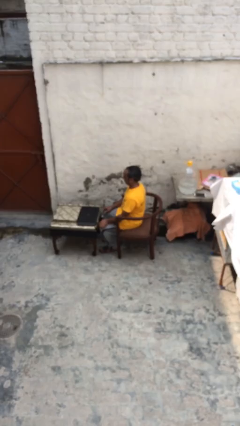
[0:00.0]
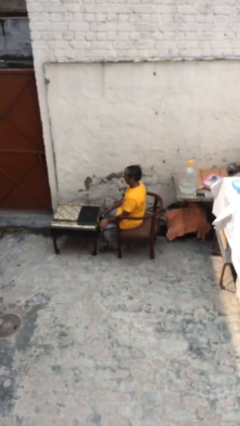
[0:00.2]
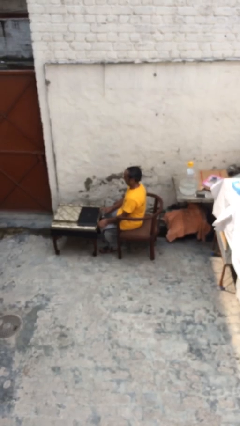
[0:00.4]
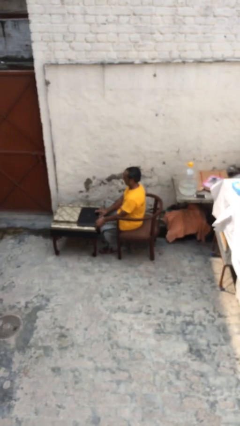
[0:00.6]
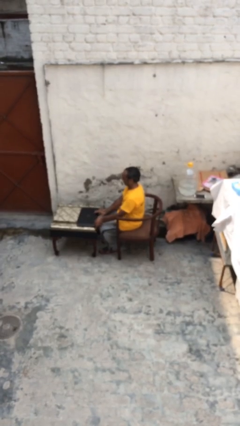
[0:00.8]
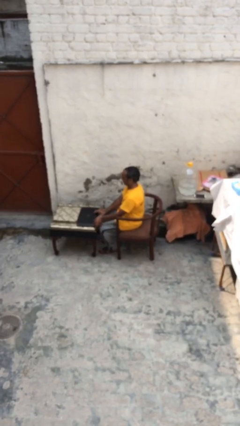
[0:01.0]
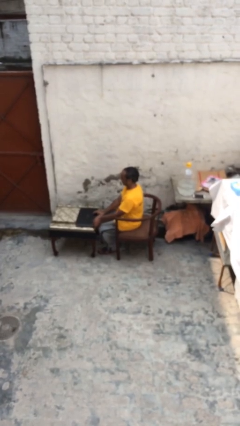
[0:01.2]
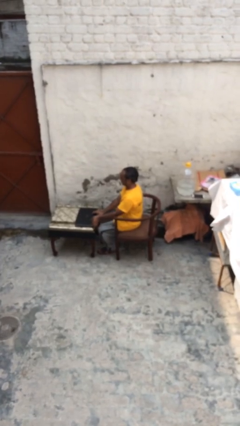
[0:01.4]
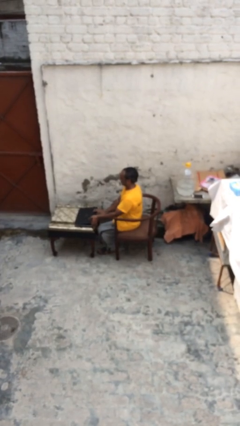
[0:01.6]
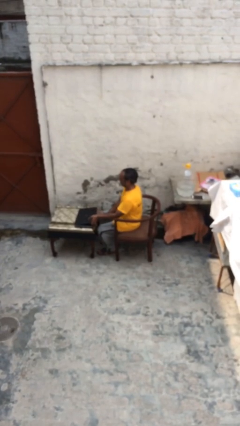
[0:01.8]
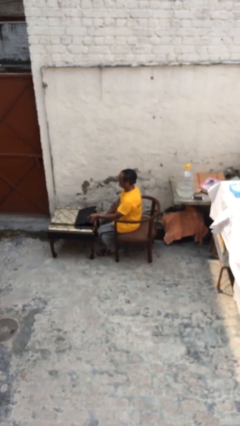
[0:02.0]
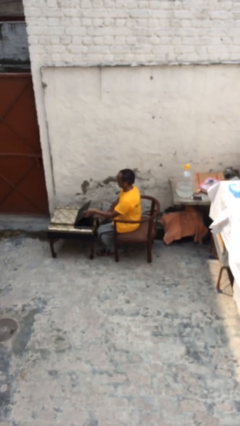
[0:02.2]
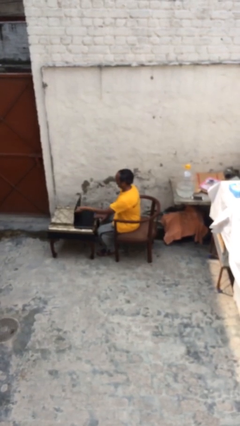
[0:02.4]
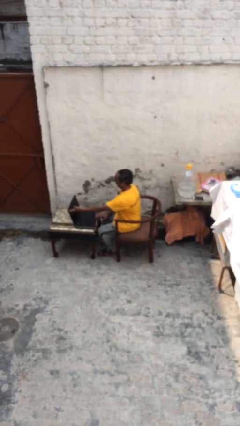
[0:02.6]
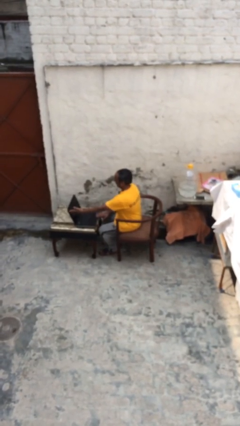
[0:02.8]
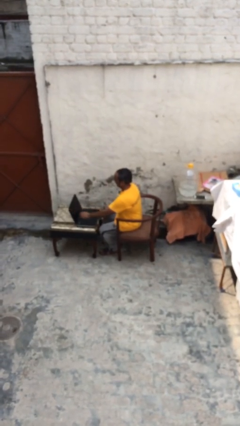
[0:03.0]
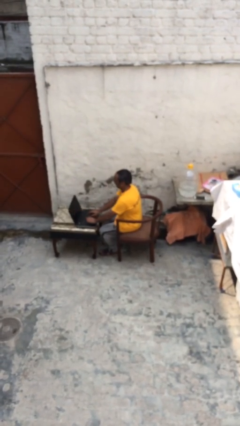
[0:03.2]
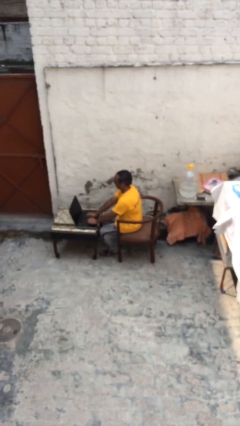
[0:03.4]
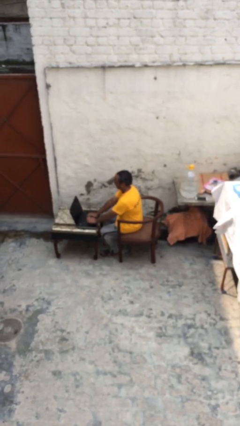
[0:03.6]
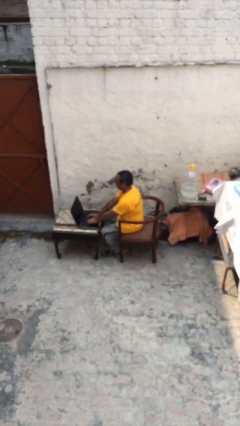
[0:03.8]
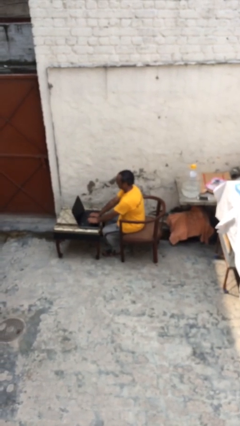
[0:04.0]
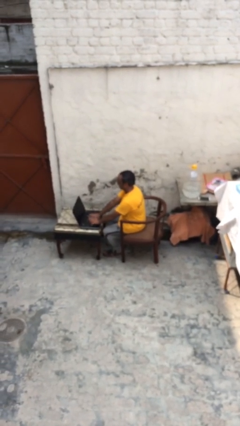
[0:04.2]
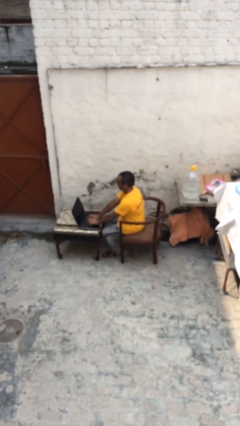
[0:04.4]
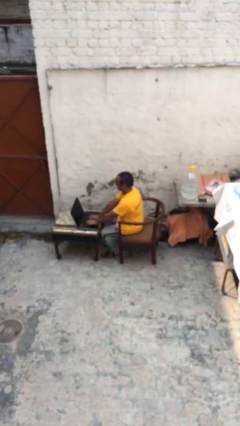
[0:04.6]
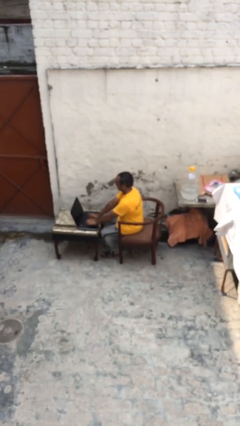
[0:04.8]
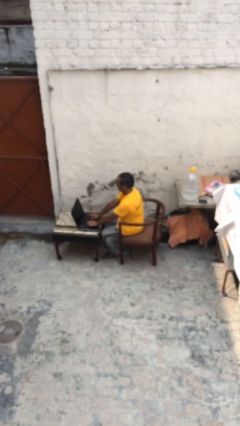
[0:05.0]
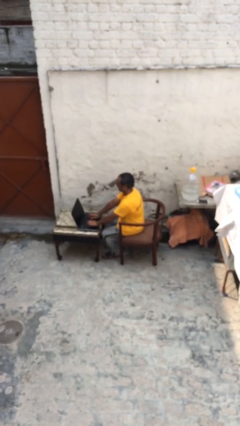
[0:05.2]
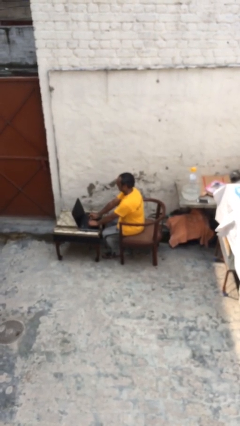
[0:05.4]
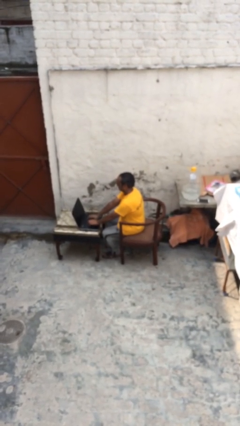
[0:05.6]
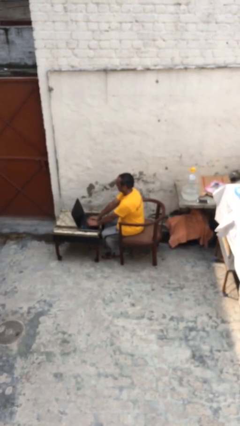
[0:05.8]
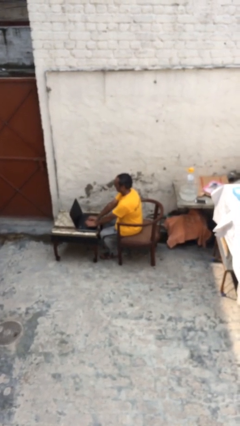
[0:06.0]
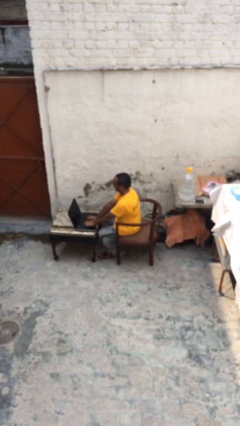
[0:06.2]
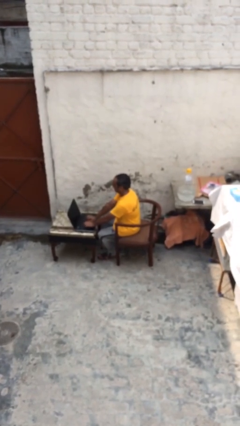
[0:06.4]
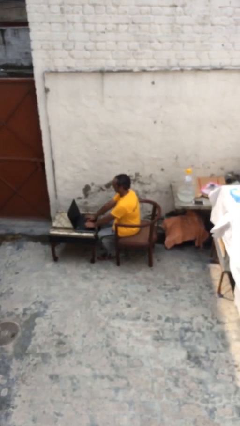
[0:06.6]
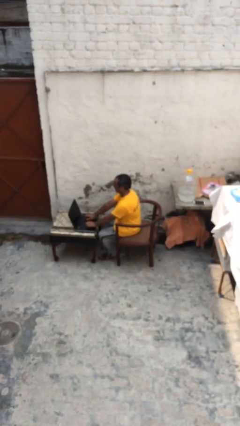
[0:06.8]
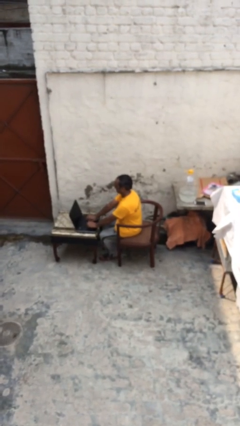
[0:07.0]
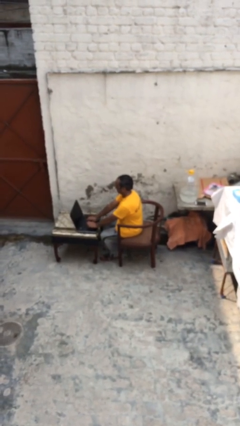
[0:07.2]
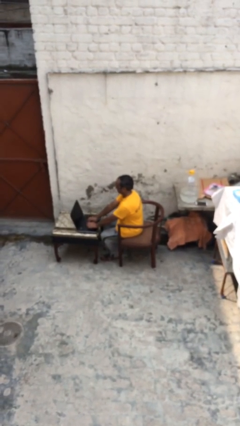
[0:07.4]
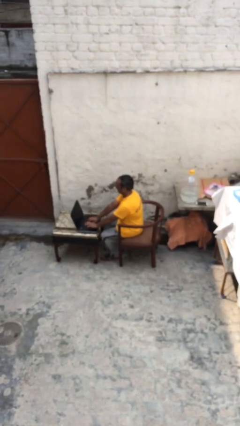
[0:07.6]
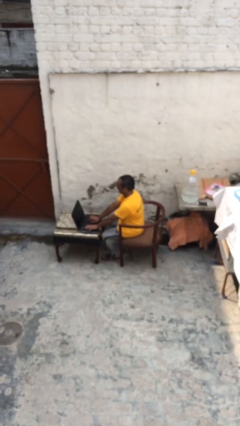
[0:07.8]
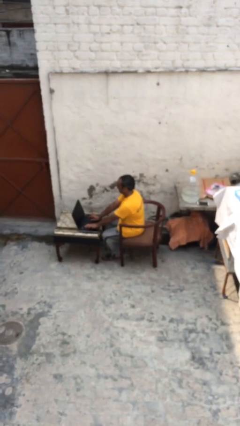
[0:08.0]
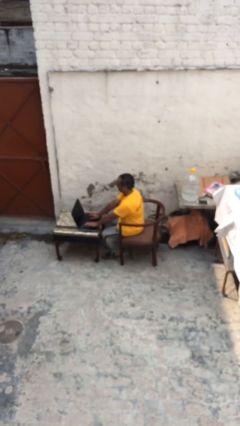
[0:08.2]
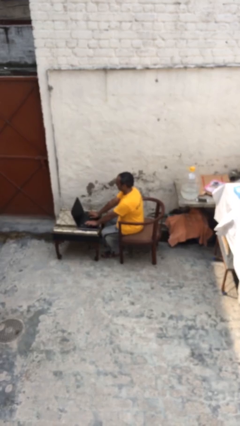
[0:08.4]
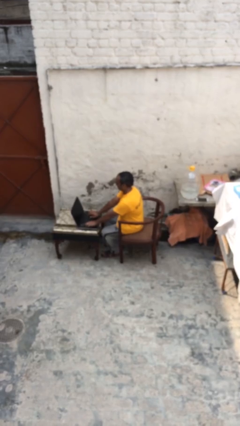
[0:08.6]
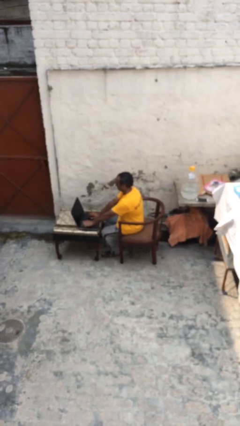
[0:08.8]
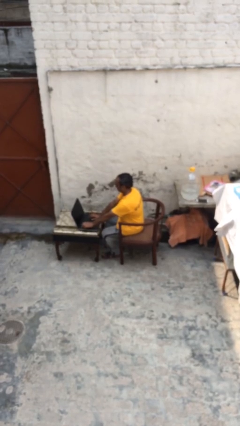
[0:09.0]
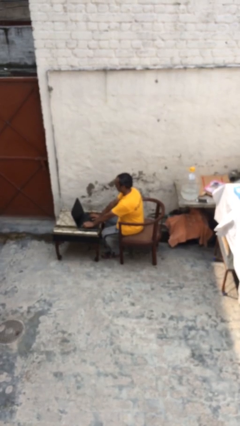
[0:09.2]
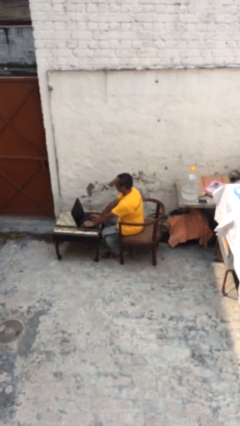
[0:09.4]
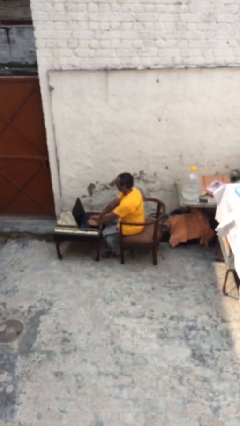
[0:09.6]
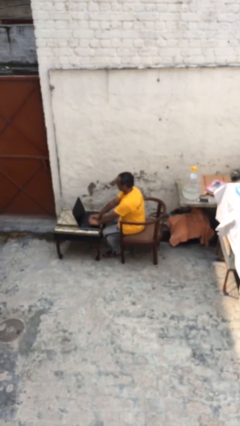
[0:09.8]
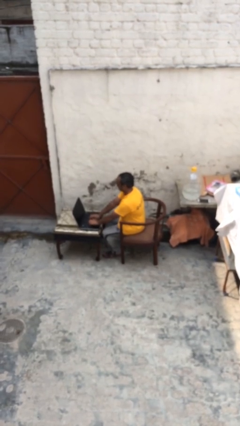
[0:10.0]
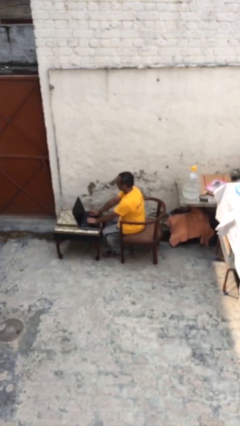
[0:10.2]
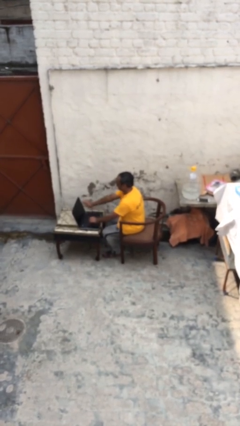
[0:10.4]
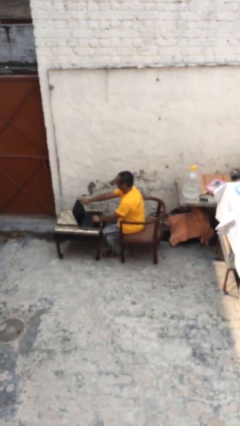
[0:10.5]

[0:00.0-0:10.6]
person interacts with laptop

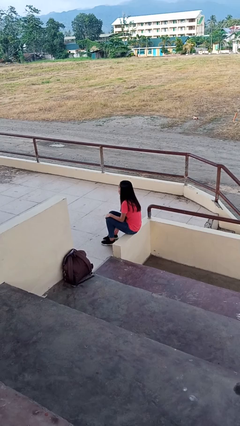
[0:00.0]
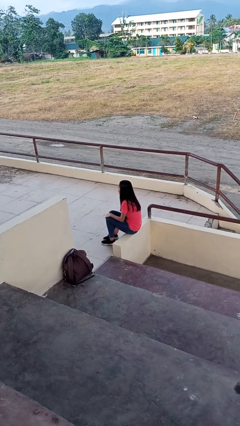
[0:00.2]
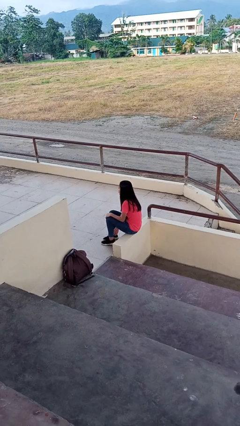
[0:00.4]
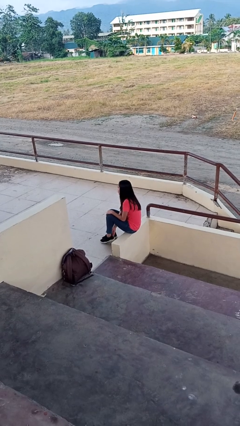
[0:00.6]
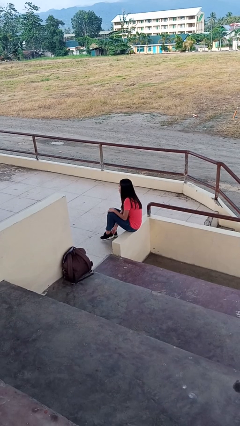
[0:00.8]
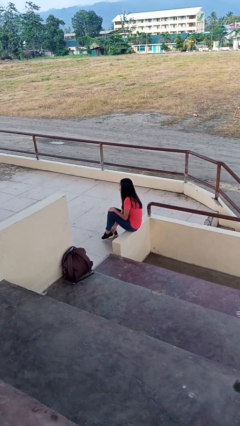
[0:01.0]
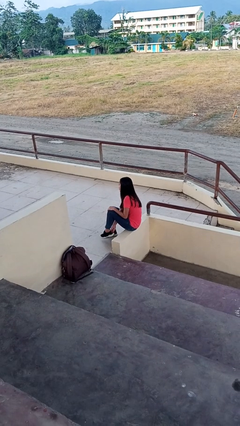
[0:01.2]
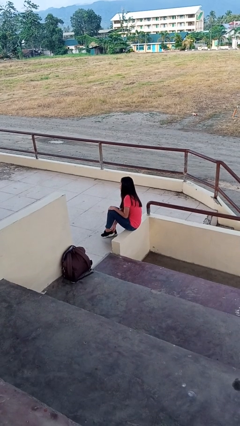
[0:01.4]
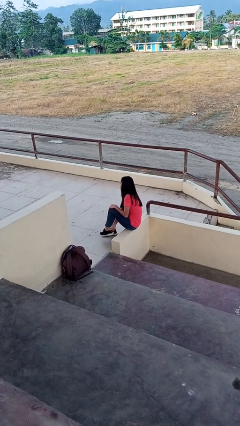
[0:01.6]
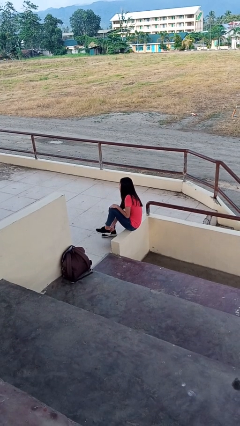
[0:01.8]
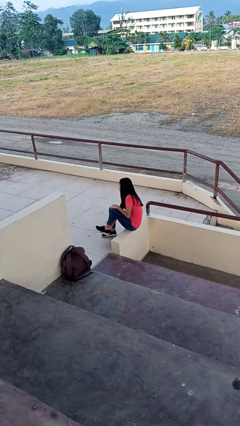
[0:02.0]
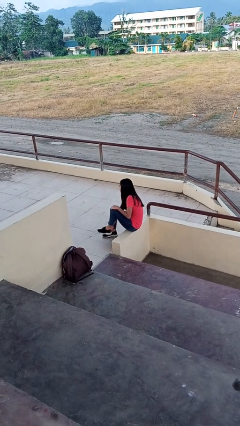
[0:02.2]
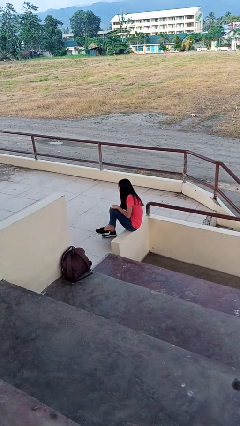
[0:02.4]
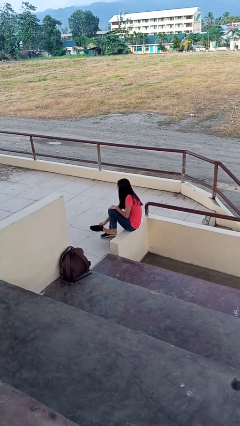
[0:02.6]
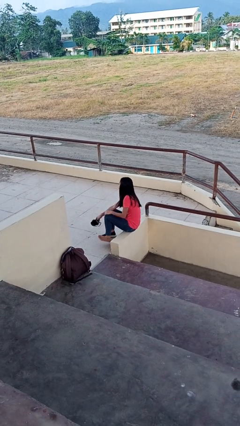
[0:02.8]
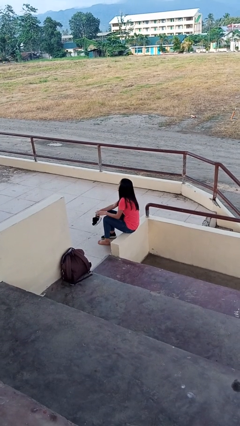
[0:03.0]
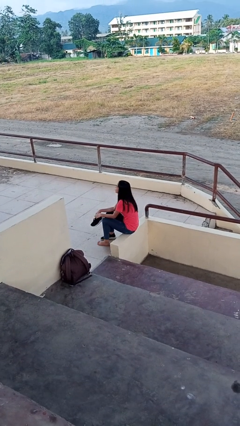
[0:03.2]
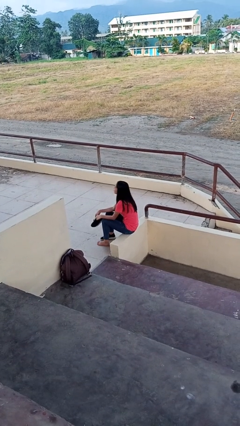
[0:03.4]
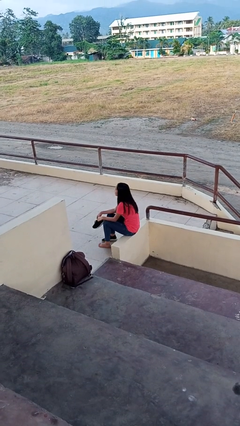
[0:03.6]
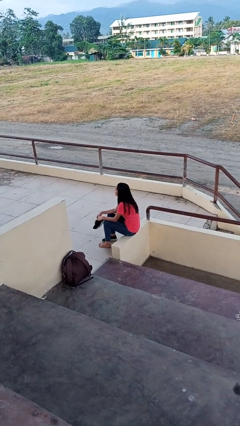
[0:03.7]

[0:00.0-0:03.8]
person takes off shoes

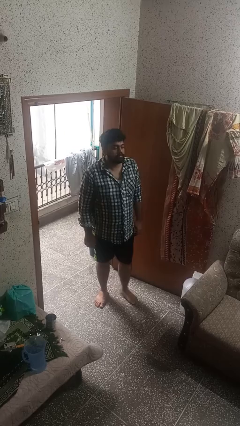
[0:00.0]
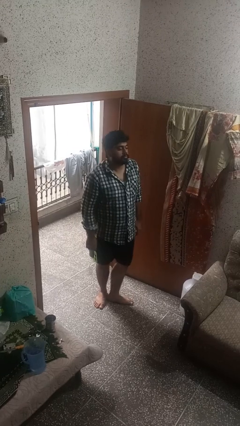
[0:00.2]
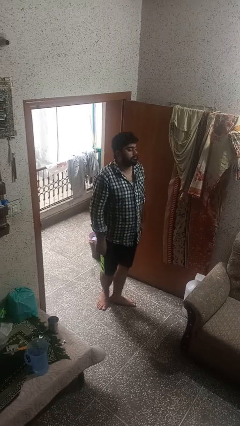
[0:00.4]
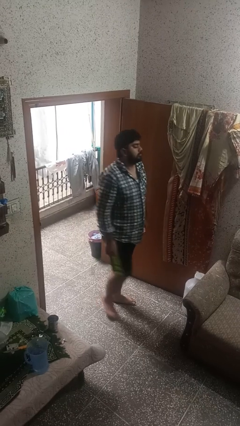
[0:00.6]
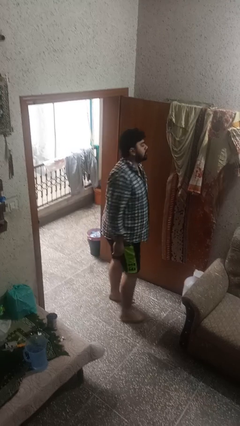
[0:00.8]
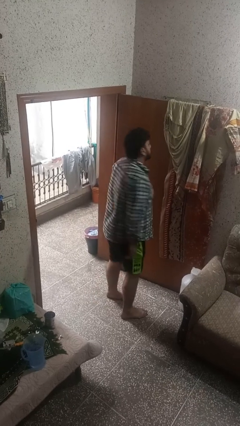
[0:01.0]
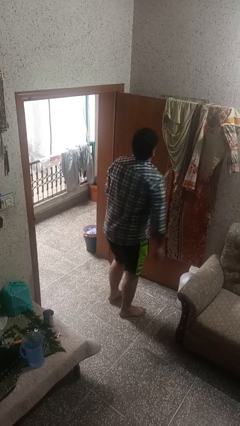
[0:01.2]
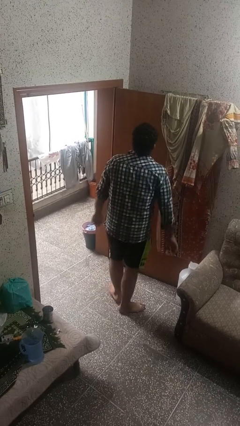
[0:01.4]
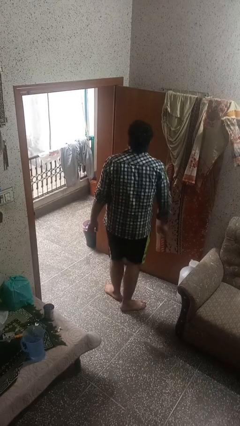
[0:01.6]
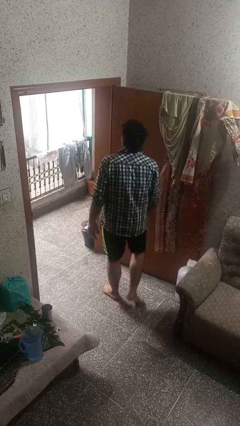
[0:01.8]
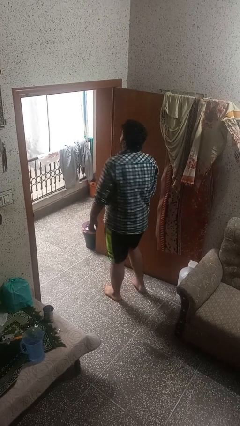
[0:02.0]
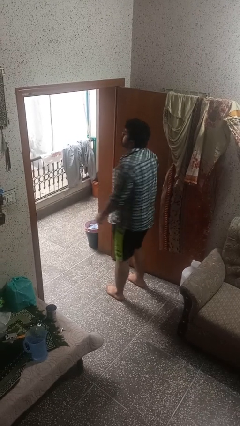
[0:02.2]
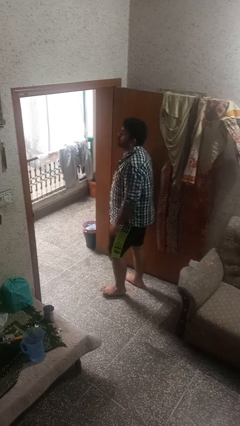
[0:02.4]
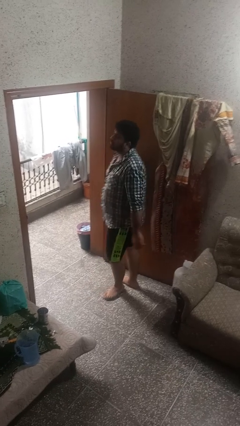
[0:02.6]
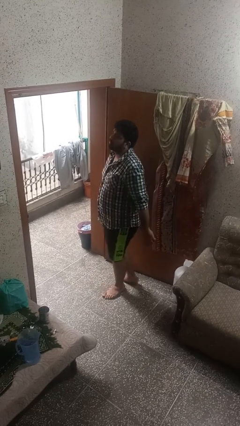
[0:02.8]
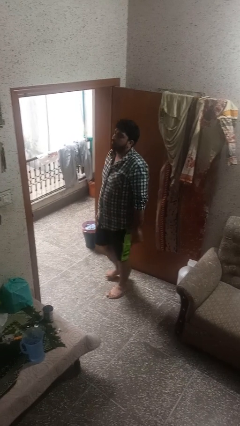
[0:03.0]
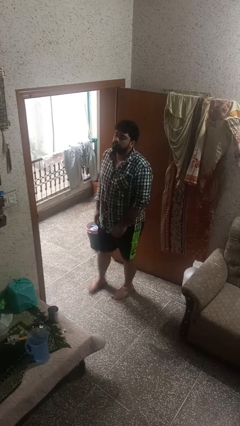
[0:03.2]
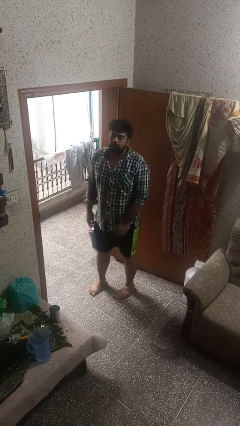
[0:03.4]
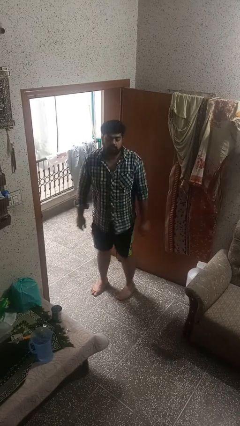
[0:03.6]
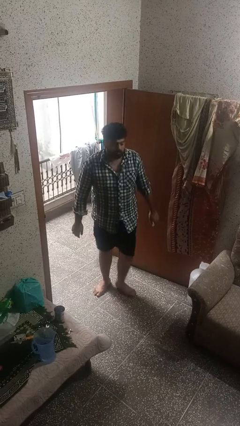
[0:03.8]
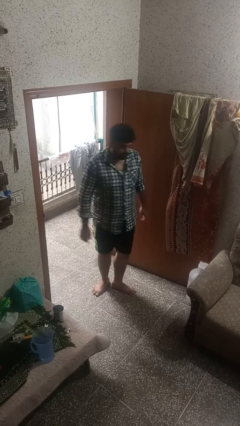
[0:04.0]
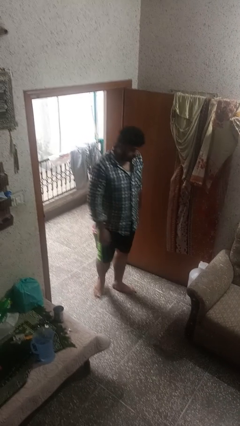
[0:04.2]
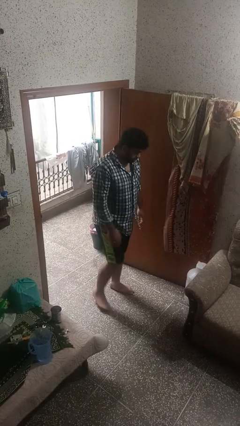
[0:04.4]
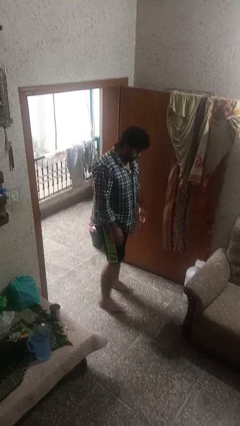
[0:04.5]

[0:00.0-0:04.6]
person twirls
